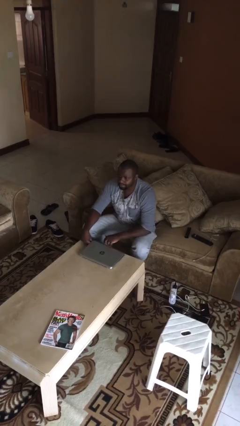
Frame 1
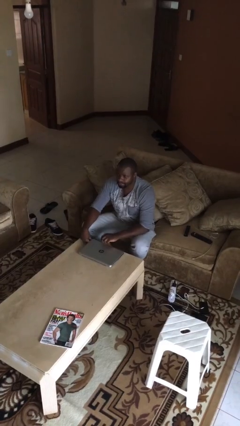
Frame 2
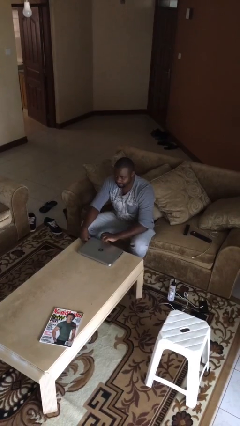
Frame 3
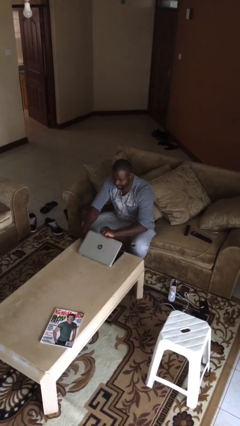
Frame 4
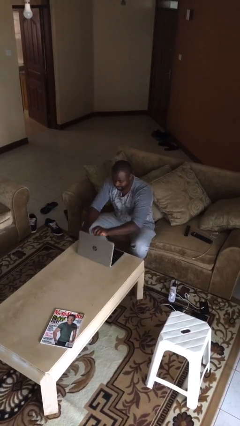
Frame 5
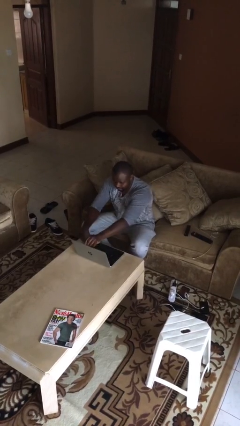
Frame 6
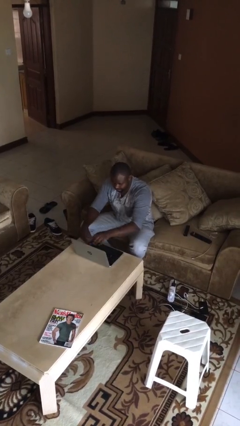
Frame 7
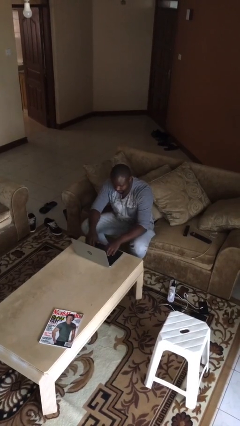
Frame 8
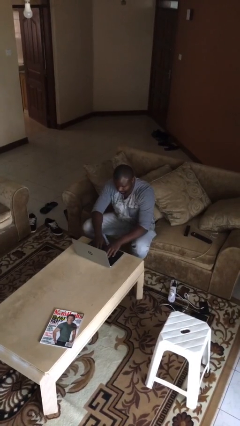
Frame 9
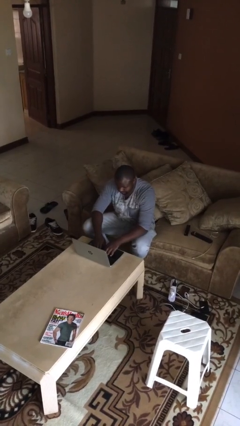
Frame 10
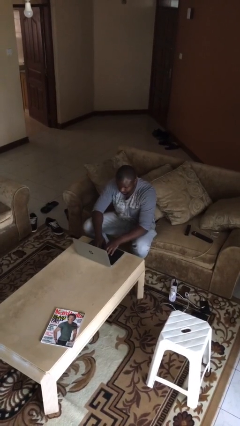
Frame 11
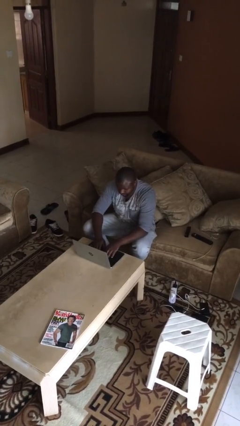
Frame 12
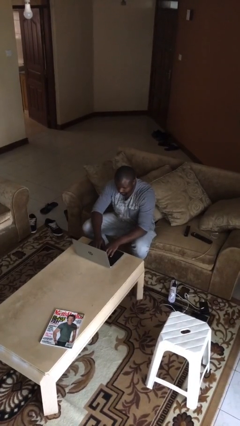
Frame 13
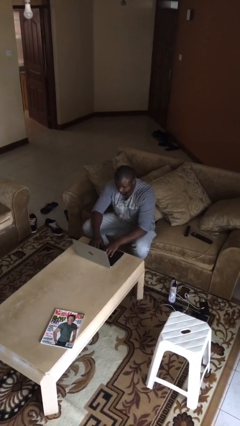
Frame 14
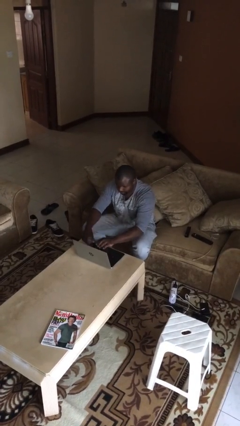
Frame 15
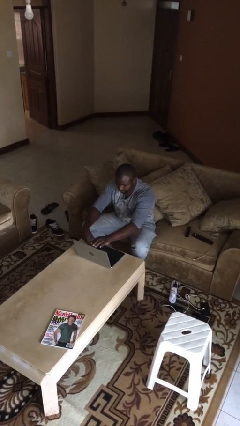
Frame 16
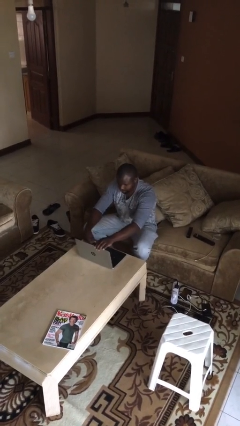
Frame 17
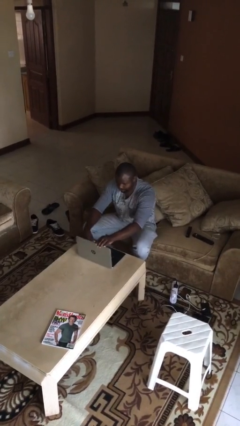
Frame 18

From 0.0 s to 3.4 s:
person interacts with laptop

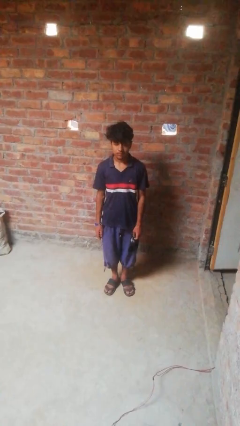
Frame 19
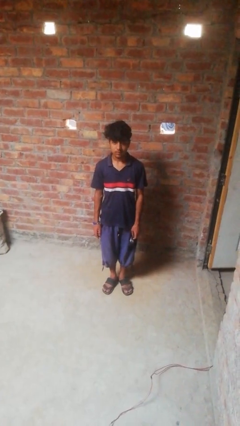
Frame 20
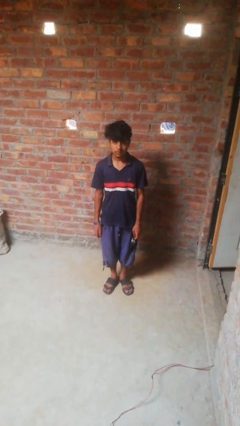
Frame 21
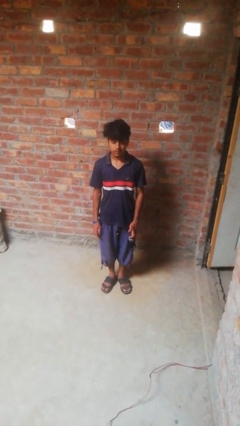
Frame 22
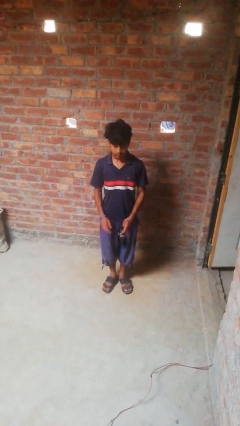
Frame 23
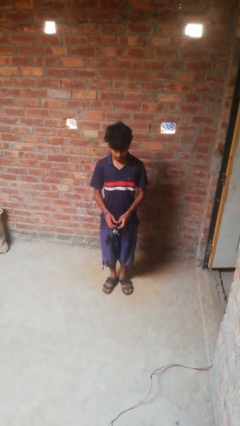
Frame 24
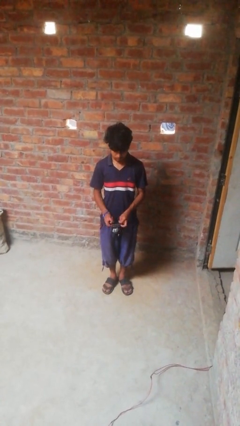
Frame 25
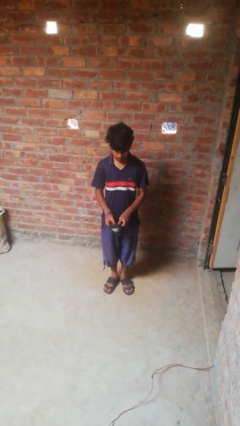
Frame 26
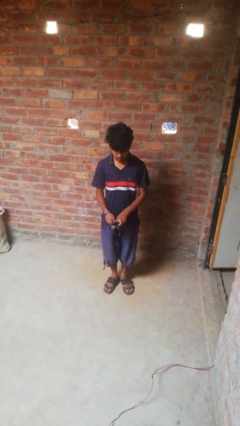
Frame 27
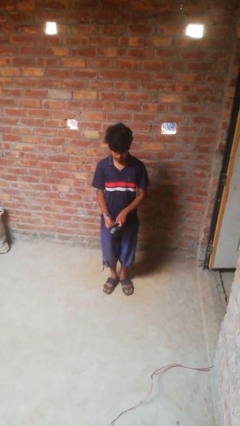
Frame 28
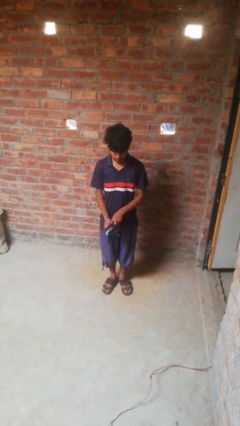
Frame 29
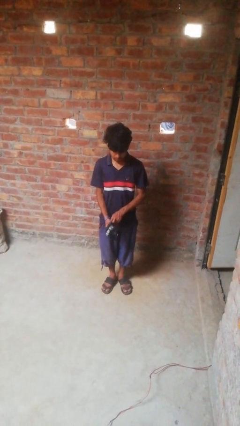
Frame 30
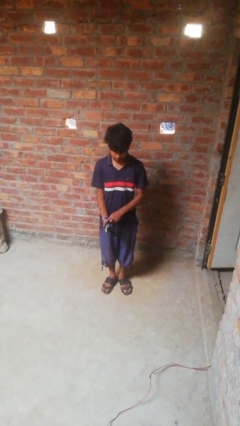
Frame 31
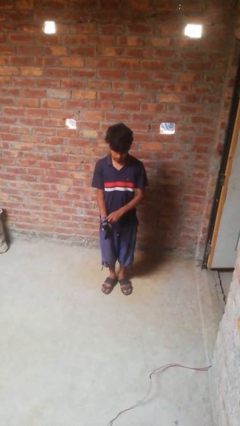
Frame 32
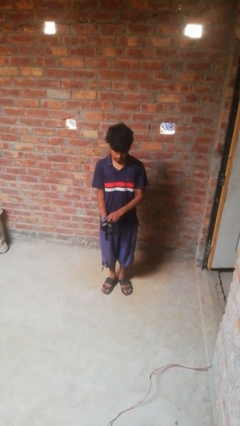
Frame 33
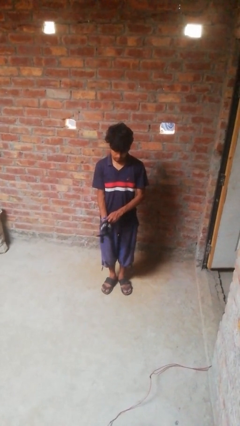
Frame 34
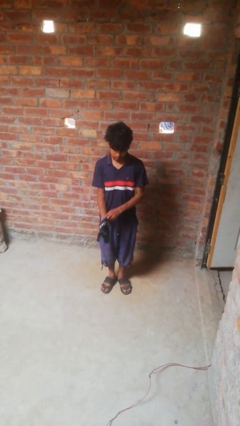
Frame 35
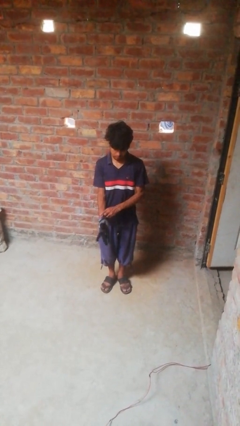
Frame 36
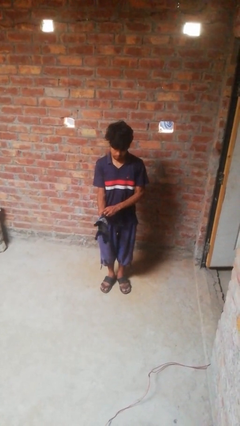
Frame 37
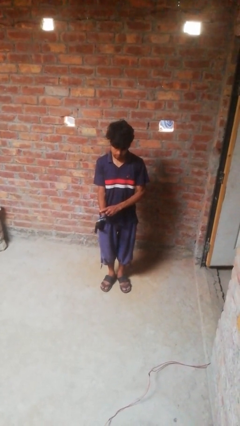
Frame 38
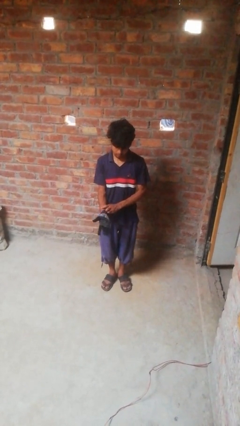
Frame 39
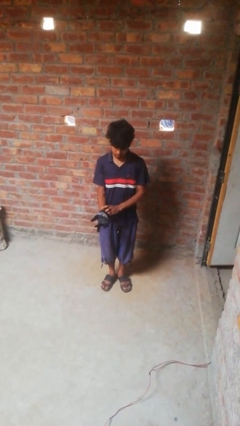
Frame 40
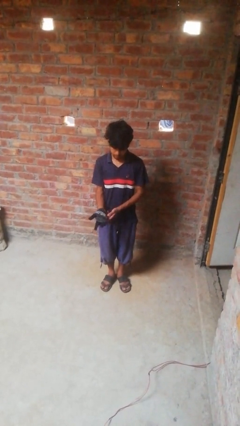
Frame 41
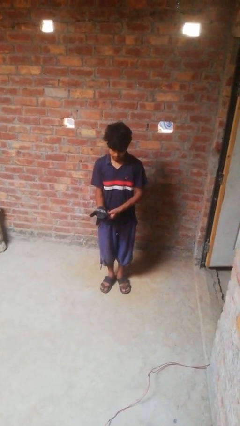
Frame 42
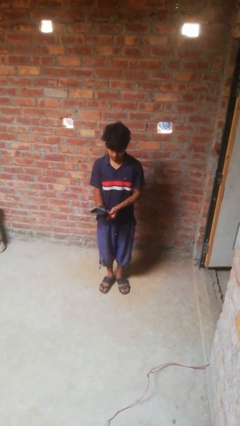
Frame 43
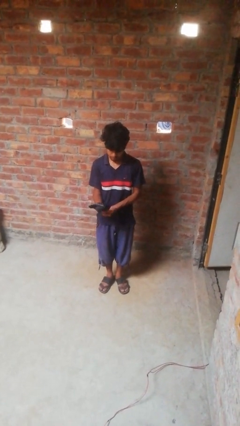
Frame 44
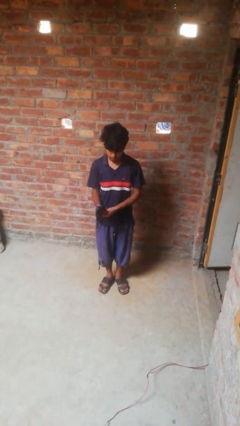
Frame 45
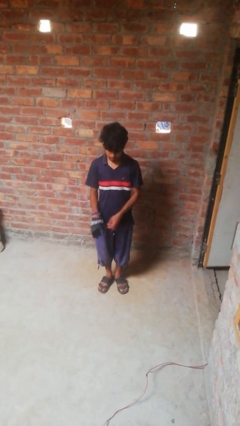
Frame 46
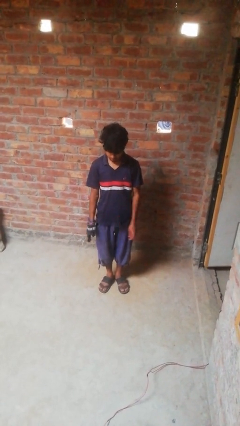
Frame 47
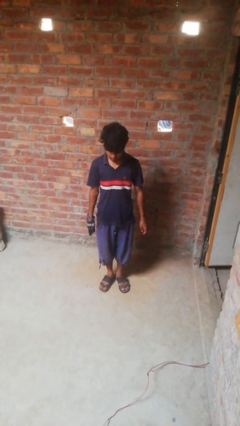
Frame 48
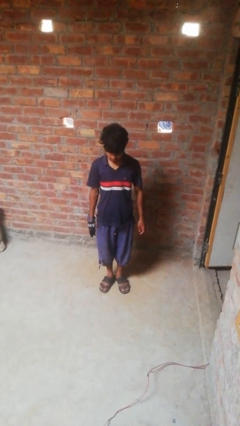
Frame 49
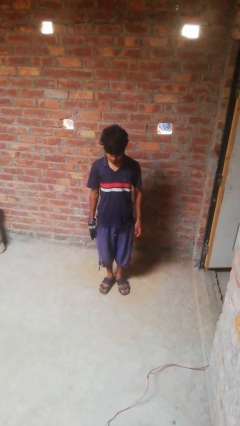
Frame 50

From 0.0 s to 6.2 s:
person puts on gloves

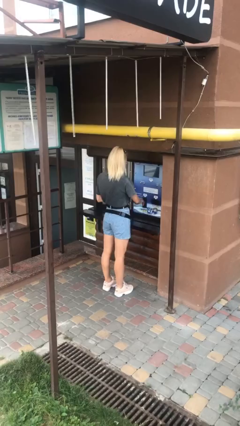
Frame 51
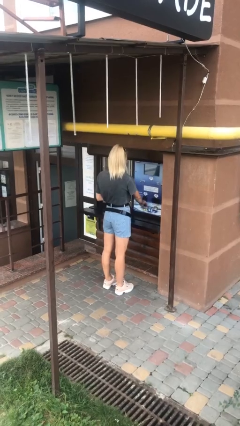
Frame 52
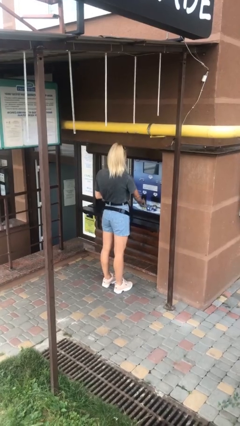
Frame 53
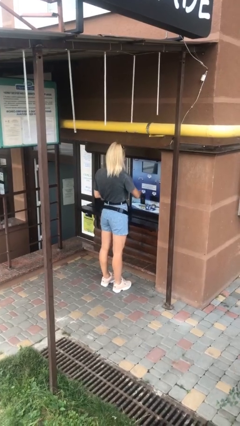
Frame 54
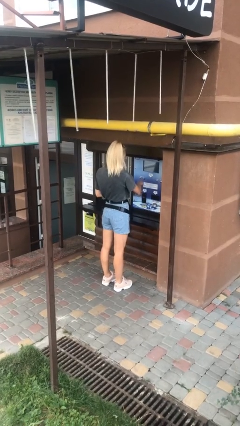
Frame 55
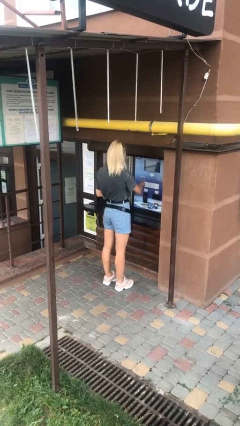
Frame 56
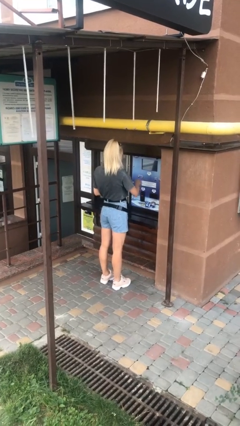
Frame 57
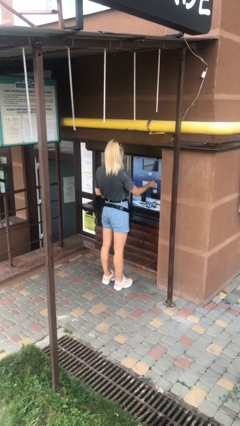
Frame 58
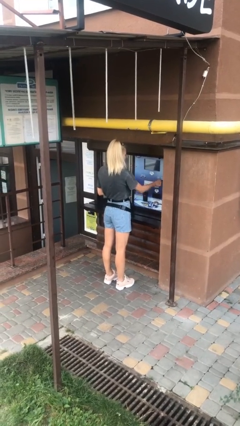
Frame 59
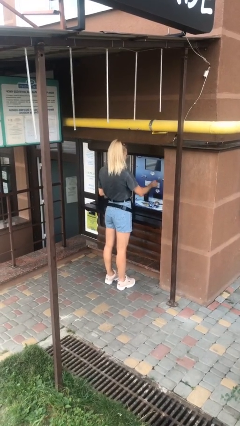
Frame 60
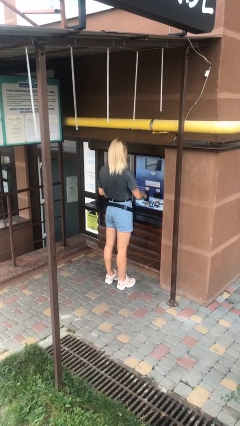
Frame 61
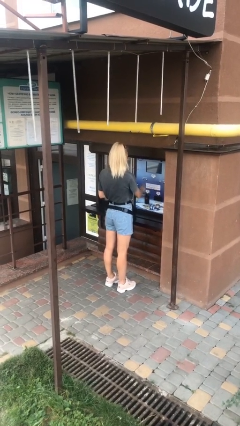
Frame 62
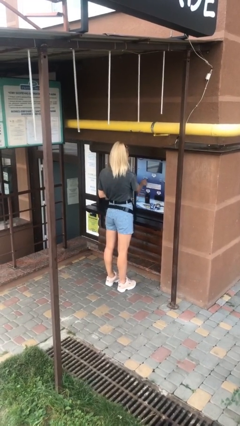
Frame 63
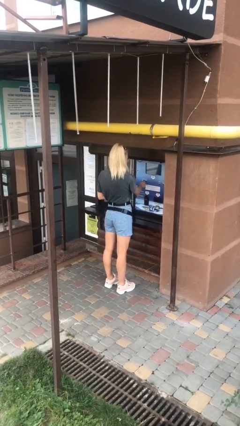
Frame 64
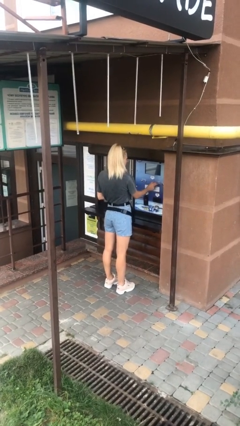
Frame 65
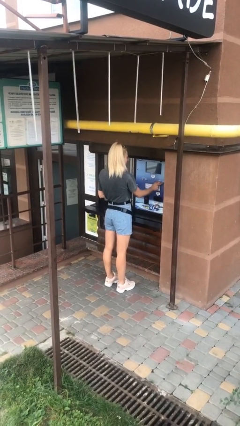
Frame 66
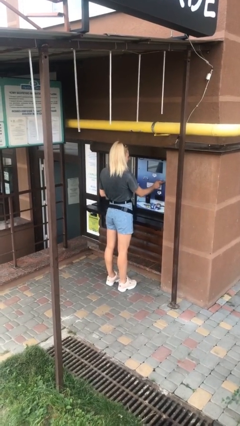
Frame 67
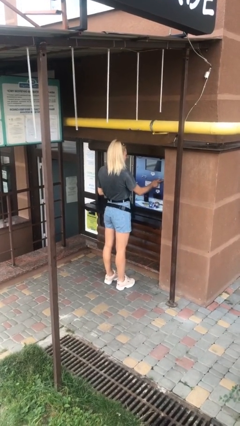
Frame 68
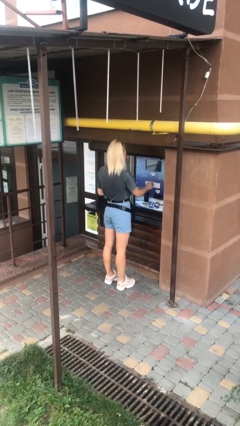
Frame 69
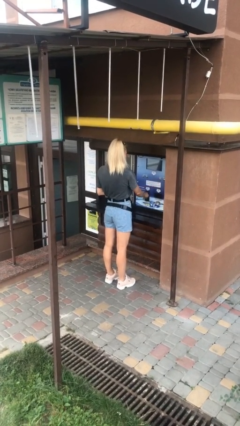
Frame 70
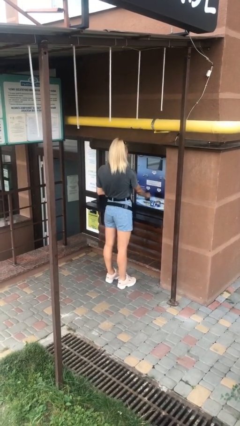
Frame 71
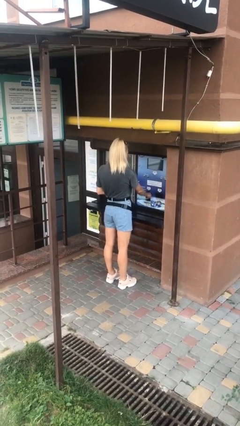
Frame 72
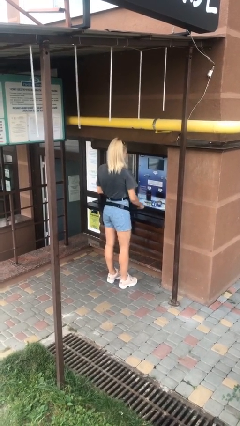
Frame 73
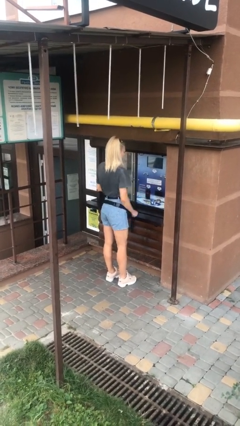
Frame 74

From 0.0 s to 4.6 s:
person purchases from machine

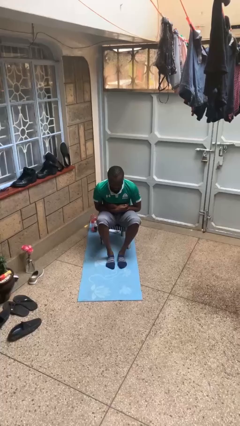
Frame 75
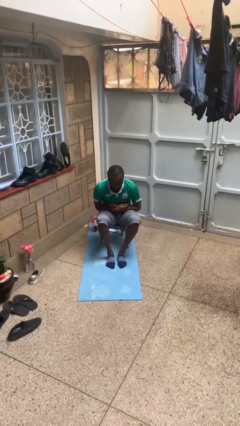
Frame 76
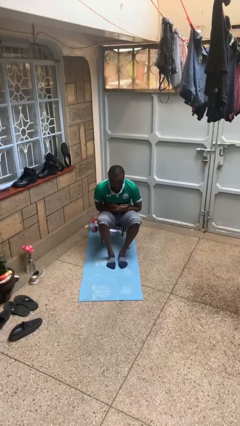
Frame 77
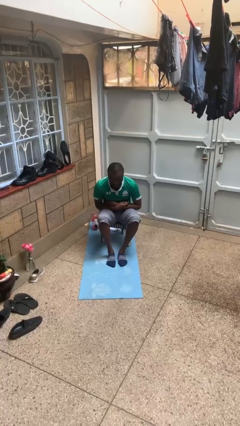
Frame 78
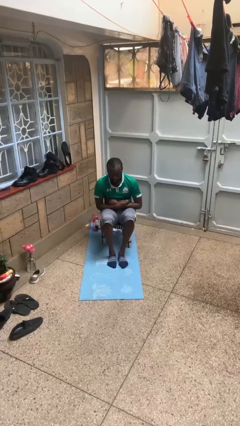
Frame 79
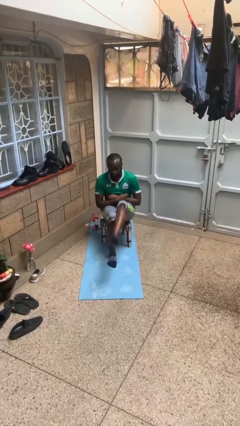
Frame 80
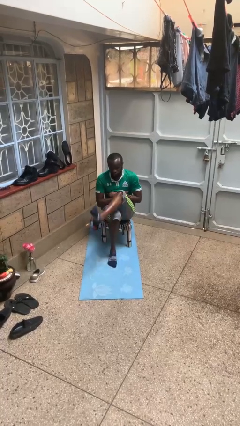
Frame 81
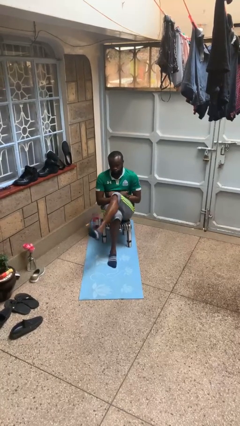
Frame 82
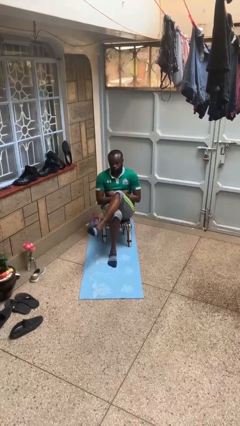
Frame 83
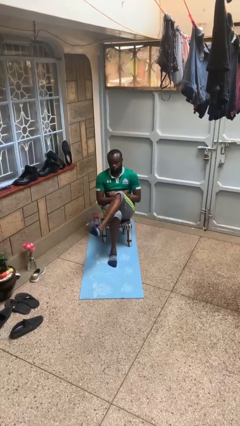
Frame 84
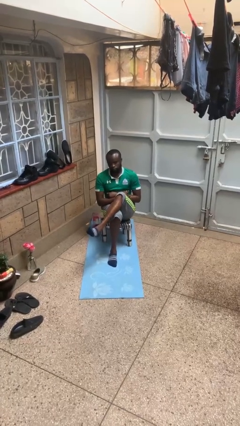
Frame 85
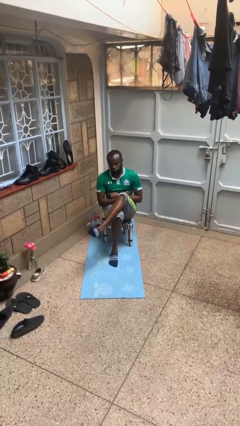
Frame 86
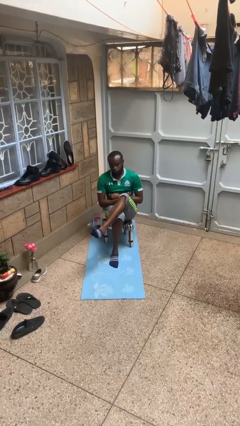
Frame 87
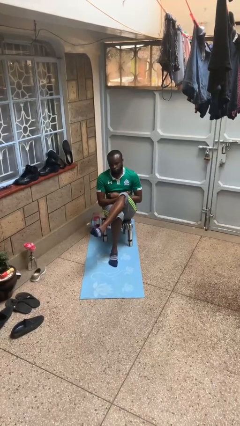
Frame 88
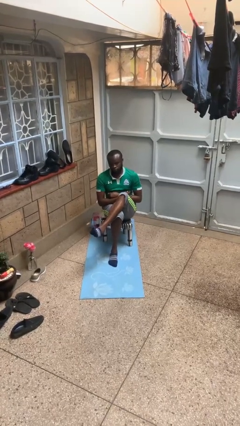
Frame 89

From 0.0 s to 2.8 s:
person crosses legs

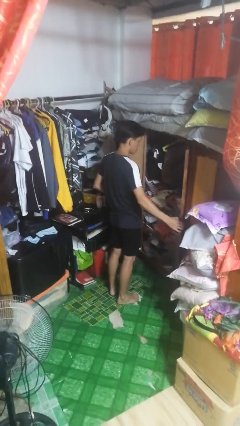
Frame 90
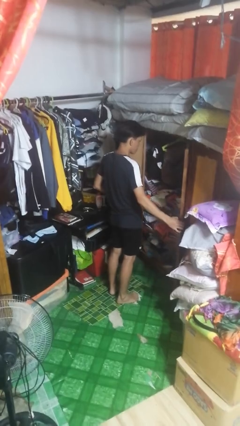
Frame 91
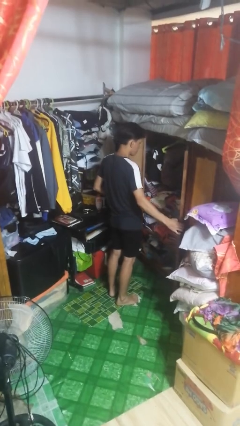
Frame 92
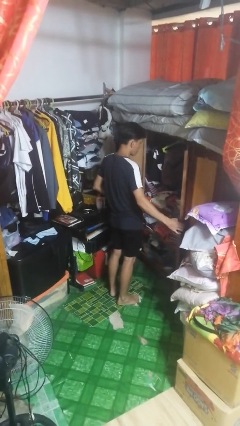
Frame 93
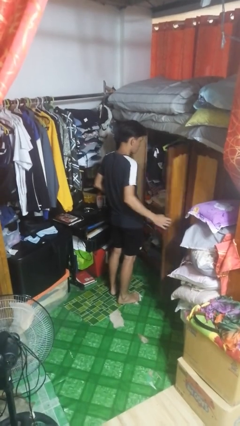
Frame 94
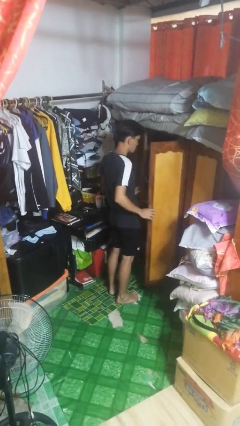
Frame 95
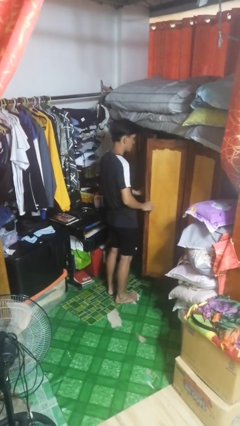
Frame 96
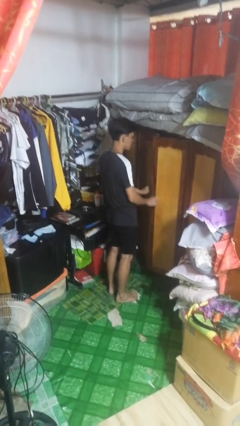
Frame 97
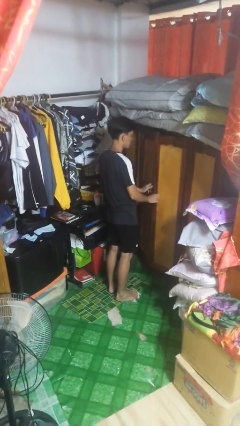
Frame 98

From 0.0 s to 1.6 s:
person closes dresser drawer
